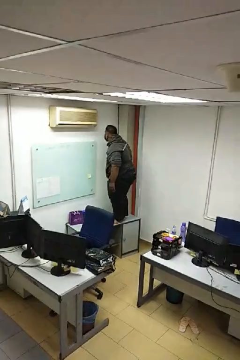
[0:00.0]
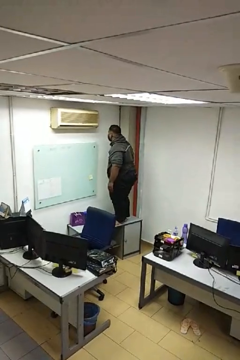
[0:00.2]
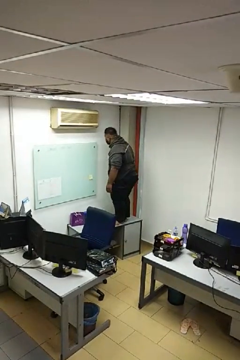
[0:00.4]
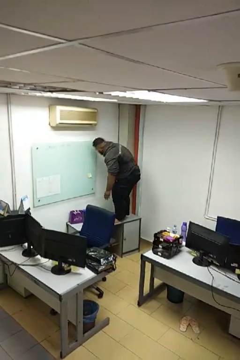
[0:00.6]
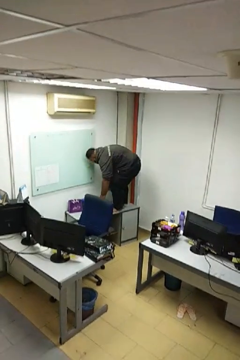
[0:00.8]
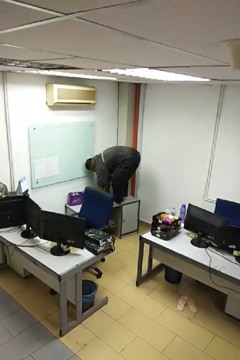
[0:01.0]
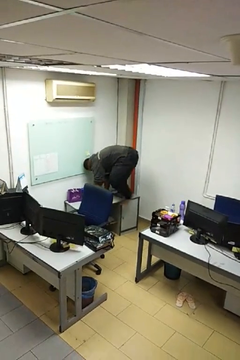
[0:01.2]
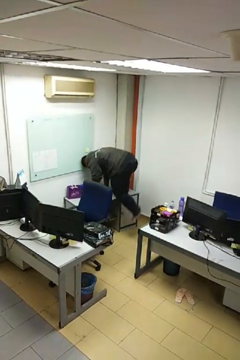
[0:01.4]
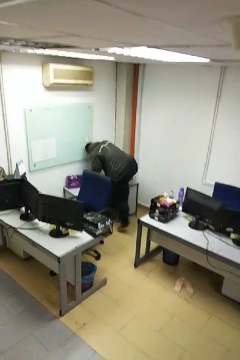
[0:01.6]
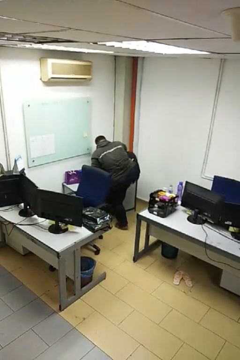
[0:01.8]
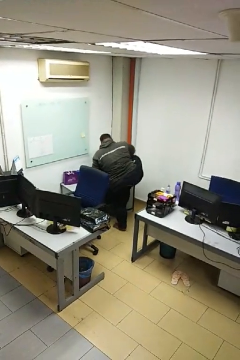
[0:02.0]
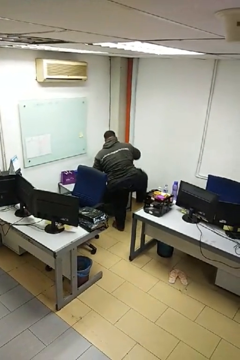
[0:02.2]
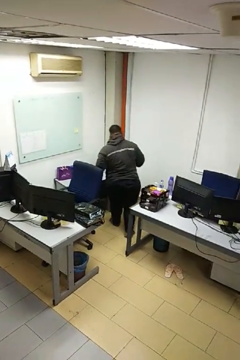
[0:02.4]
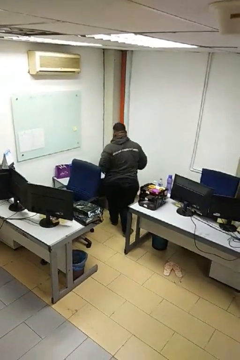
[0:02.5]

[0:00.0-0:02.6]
person climbs off table

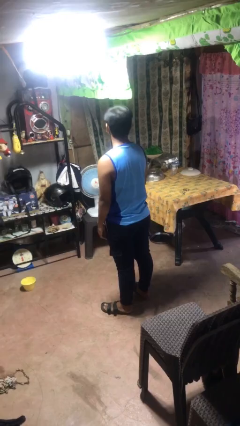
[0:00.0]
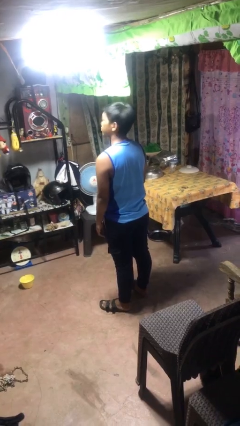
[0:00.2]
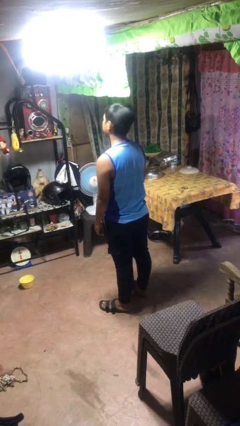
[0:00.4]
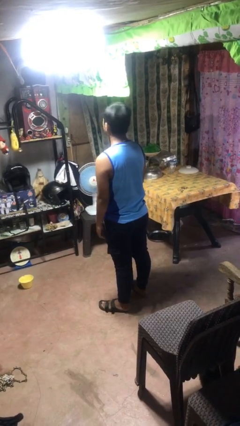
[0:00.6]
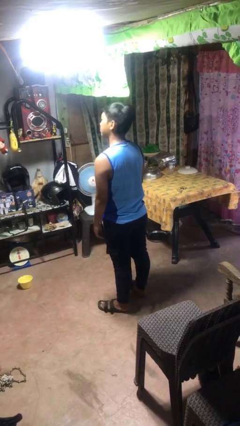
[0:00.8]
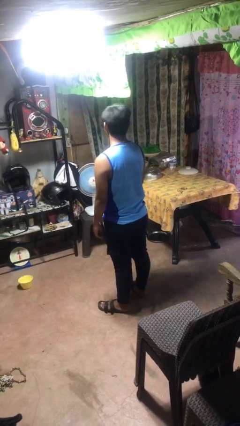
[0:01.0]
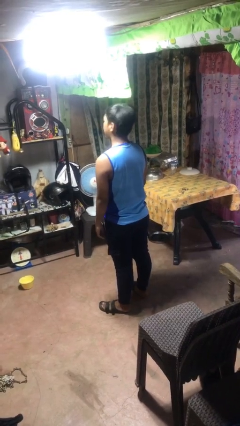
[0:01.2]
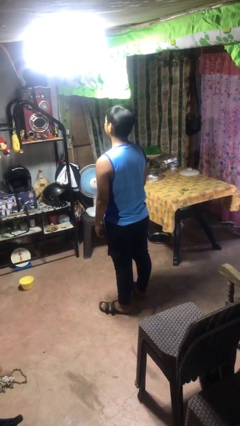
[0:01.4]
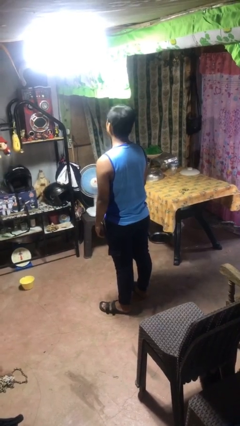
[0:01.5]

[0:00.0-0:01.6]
person shakes head

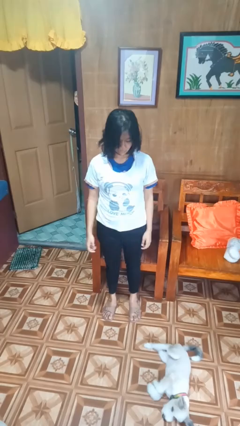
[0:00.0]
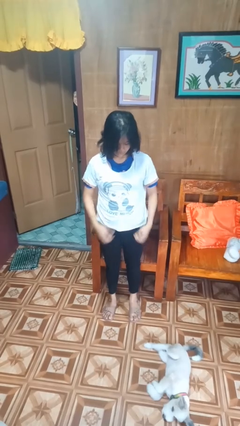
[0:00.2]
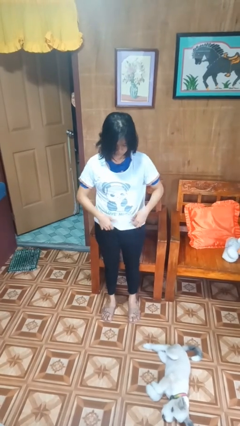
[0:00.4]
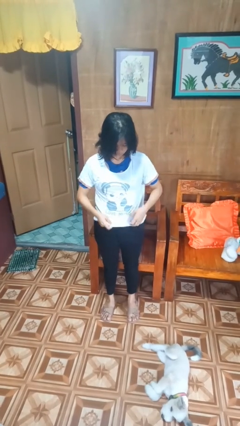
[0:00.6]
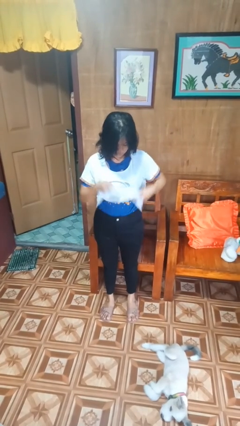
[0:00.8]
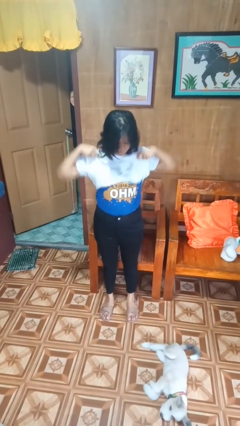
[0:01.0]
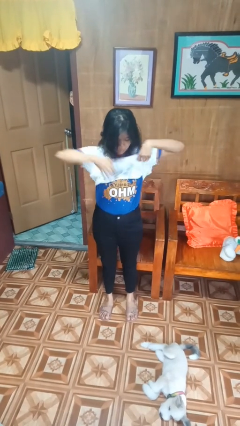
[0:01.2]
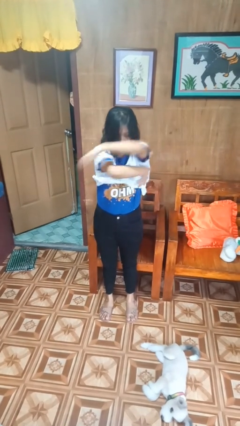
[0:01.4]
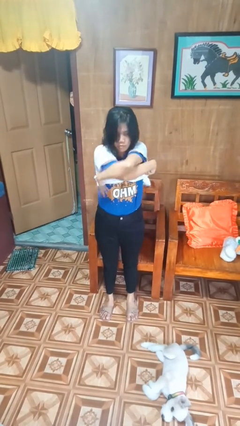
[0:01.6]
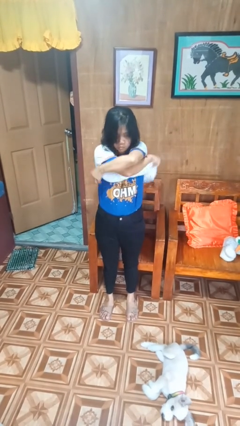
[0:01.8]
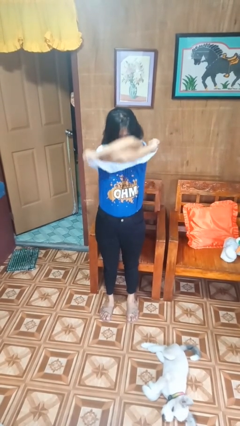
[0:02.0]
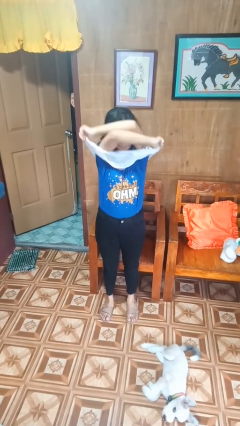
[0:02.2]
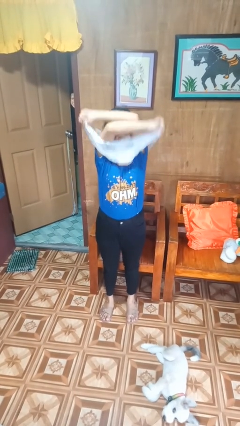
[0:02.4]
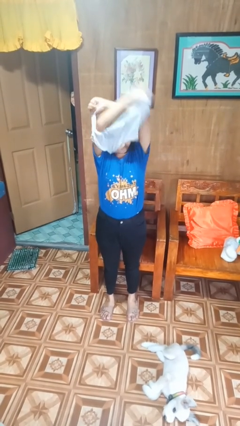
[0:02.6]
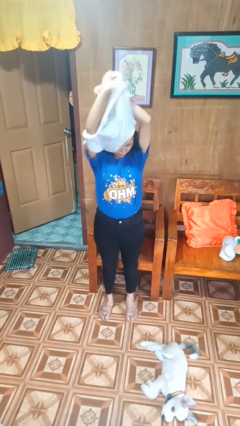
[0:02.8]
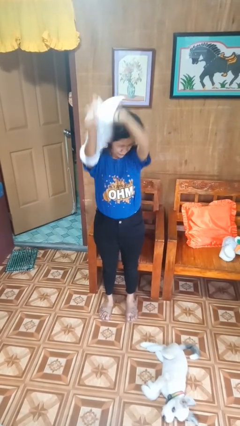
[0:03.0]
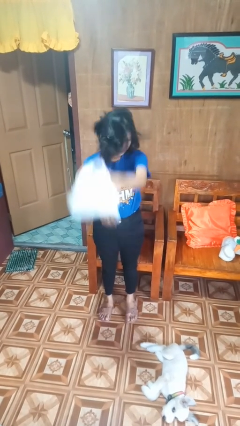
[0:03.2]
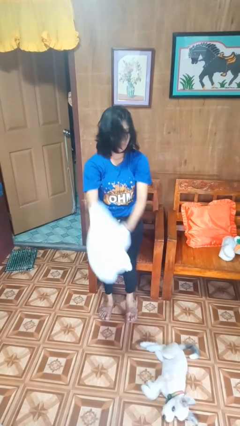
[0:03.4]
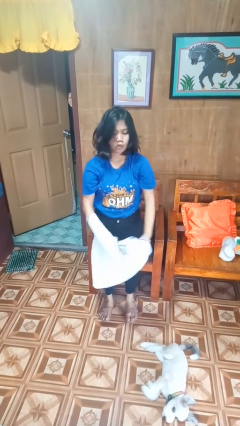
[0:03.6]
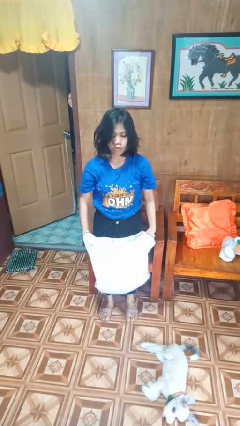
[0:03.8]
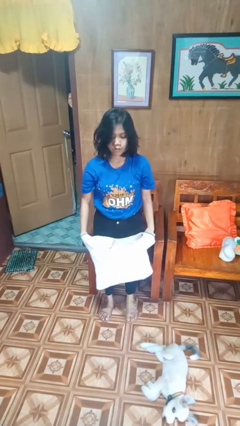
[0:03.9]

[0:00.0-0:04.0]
person takes off shirt

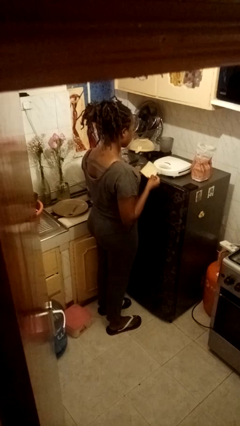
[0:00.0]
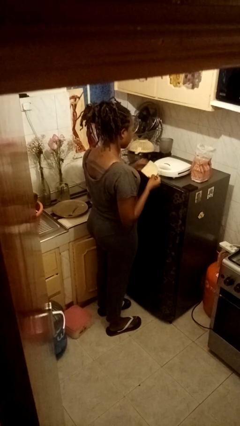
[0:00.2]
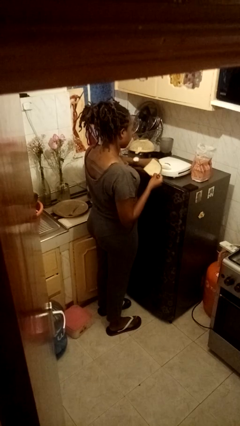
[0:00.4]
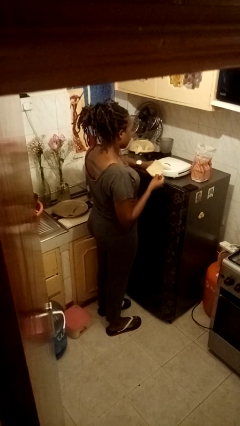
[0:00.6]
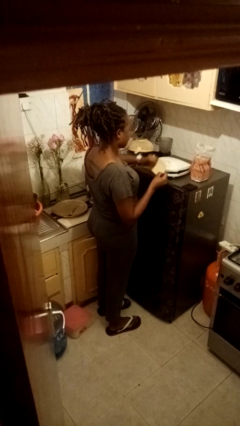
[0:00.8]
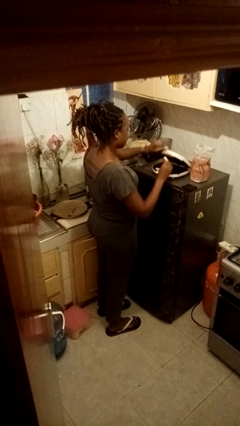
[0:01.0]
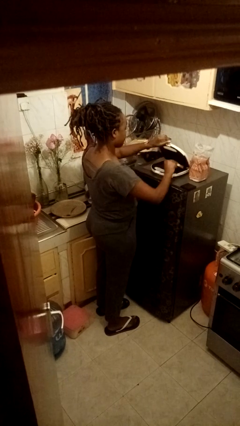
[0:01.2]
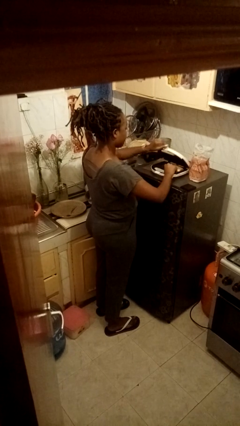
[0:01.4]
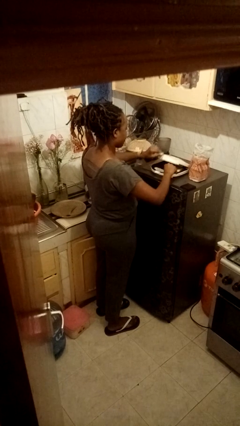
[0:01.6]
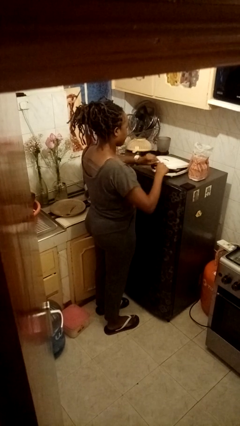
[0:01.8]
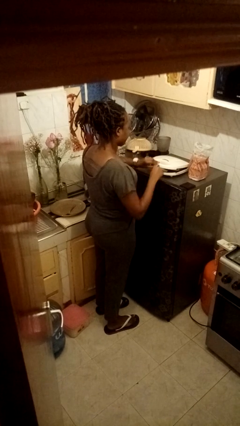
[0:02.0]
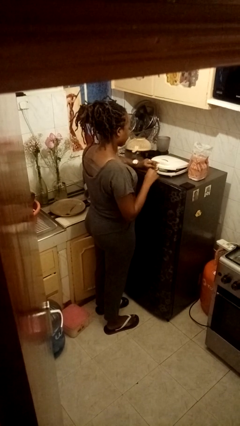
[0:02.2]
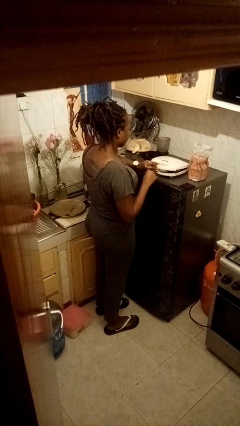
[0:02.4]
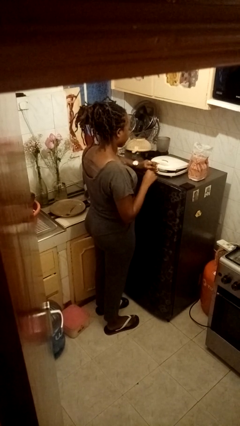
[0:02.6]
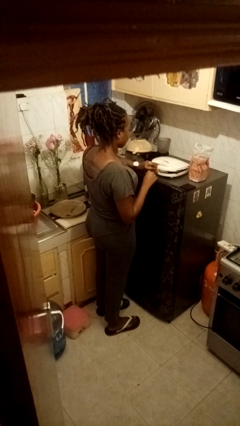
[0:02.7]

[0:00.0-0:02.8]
person puts object into toaster

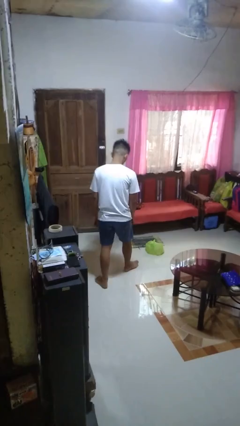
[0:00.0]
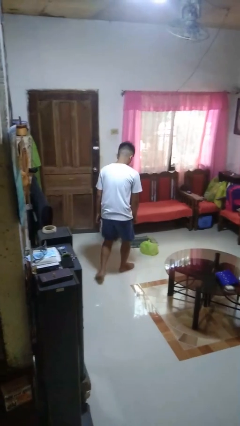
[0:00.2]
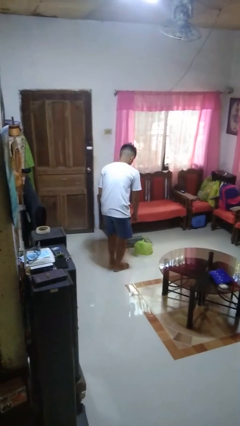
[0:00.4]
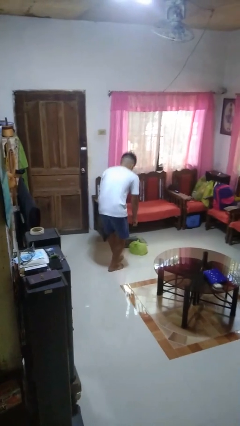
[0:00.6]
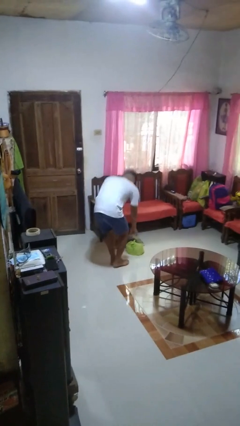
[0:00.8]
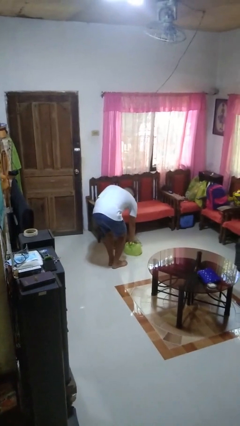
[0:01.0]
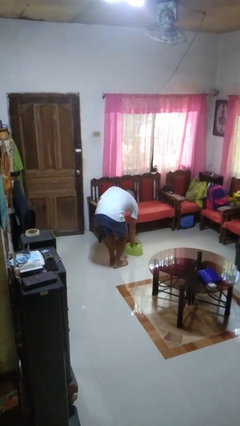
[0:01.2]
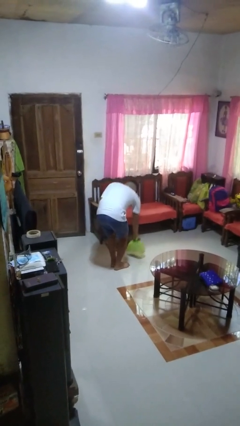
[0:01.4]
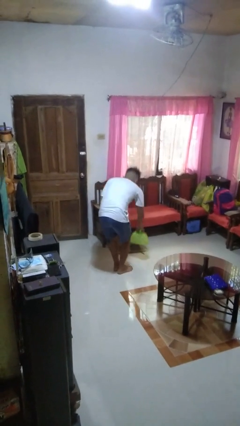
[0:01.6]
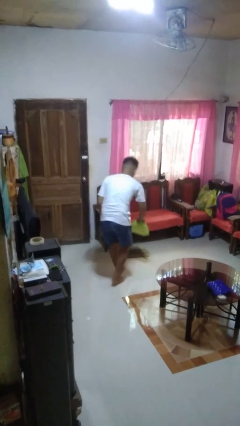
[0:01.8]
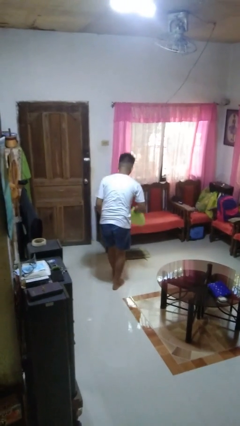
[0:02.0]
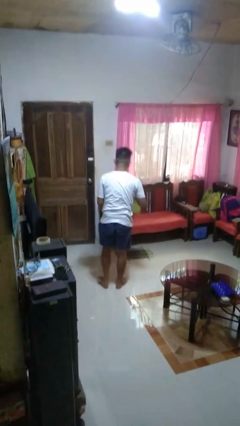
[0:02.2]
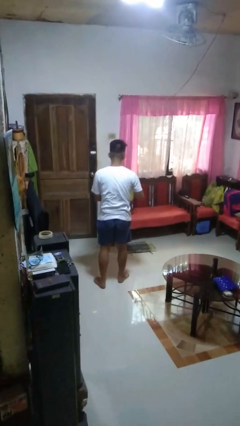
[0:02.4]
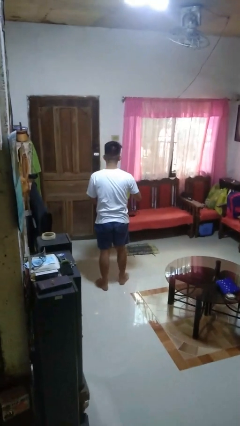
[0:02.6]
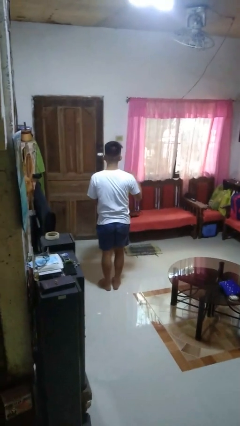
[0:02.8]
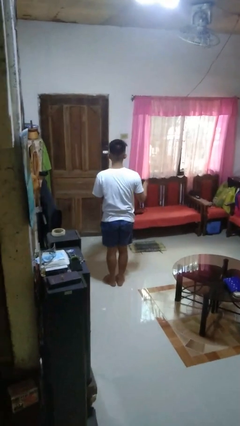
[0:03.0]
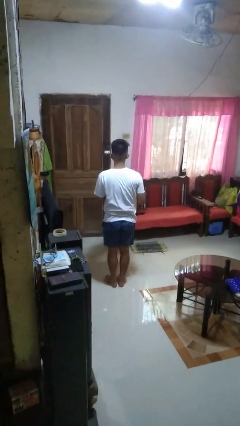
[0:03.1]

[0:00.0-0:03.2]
person picks up object from floor

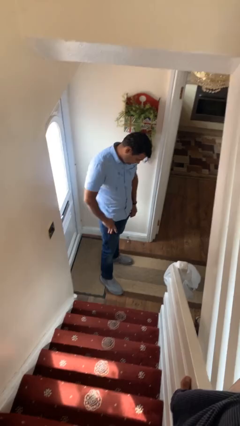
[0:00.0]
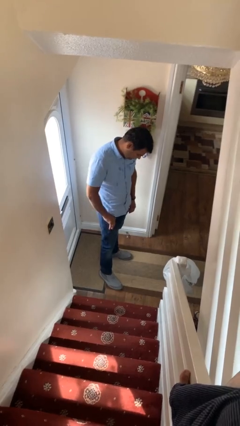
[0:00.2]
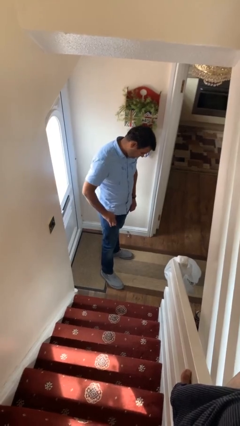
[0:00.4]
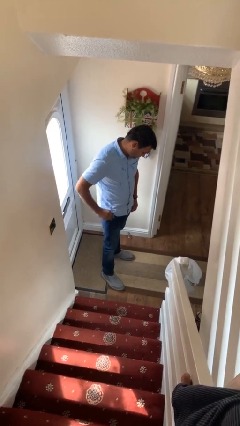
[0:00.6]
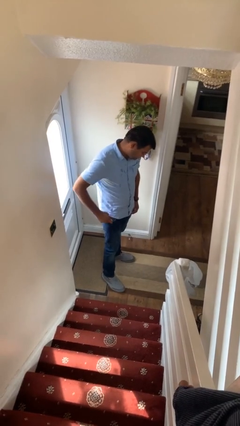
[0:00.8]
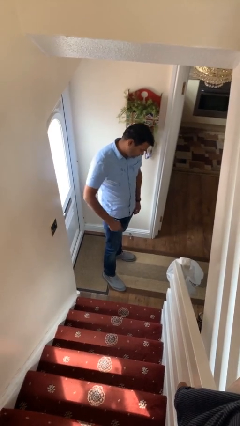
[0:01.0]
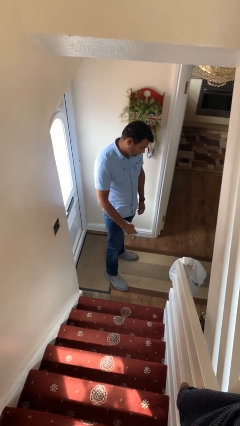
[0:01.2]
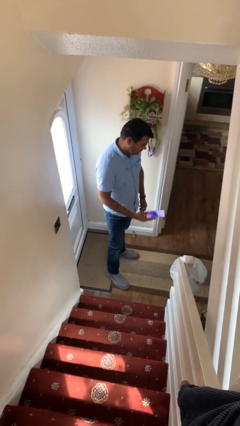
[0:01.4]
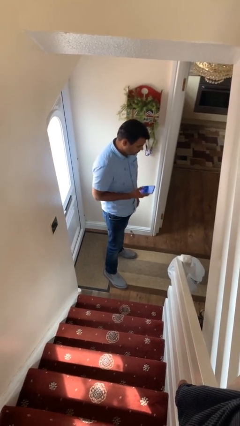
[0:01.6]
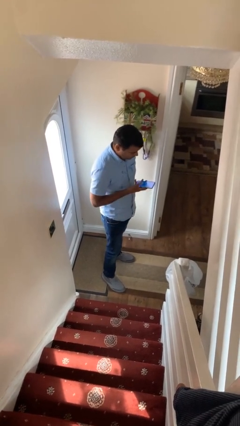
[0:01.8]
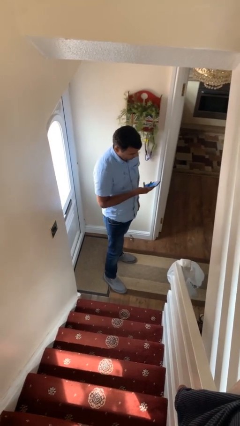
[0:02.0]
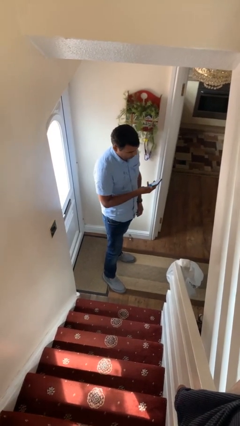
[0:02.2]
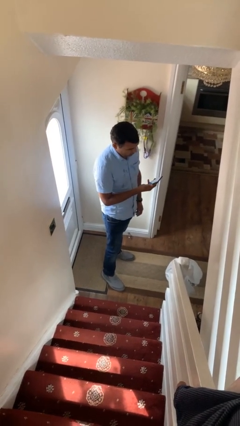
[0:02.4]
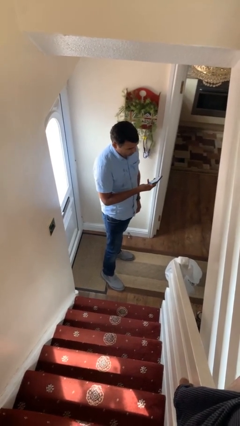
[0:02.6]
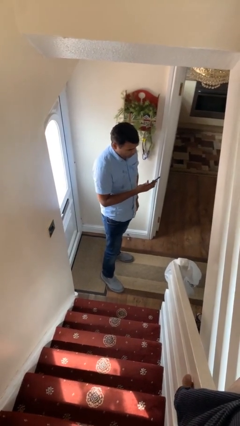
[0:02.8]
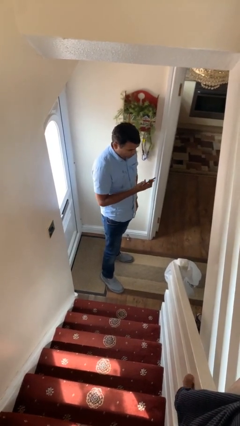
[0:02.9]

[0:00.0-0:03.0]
person takes phone from pocket

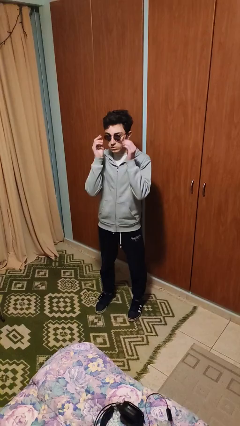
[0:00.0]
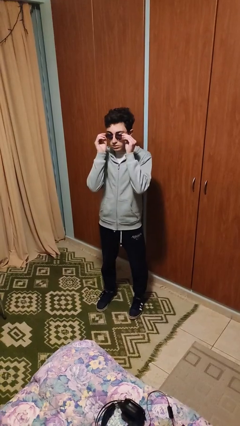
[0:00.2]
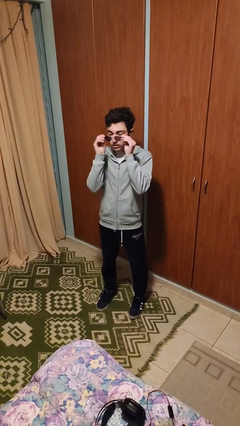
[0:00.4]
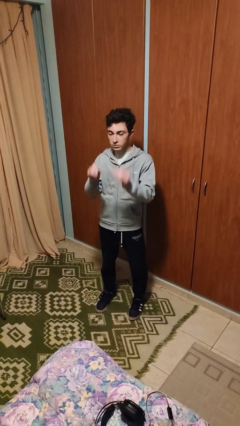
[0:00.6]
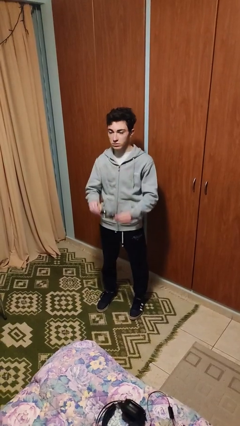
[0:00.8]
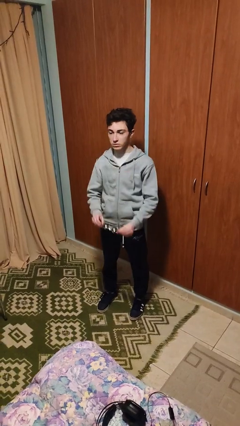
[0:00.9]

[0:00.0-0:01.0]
person takes off glasses
